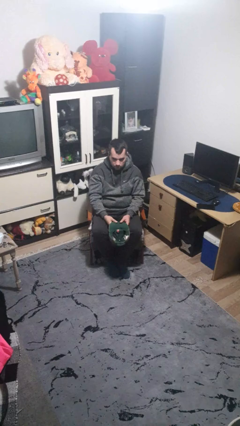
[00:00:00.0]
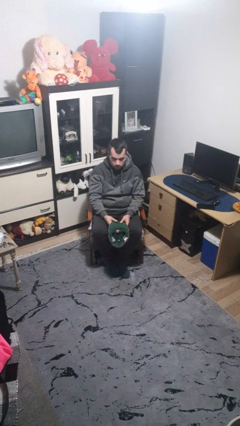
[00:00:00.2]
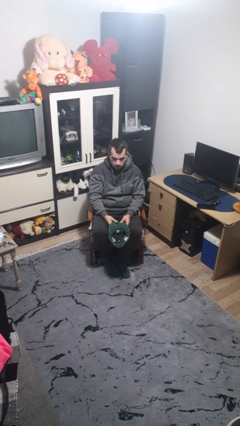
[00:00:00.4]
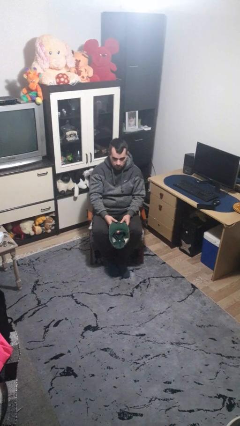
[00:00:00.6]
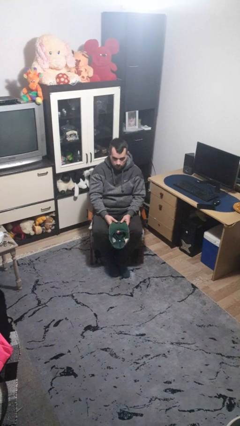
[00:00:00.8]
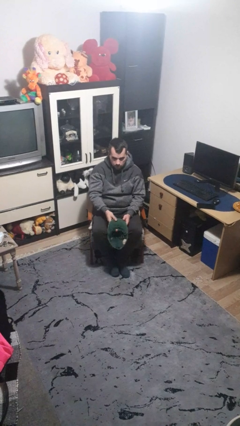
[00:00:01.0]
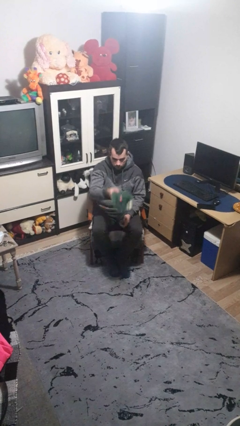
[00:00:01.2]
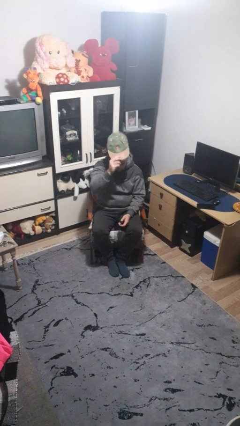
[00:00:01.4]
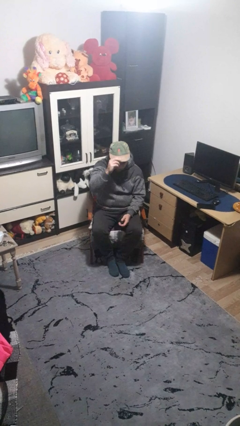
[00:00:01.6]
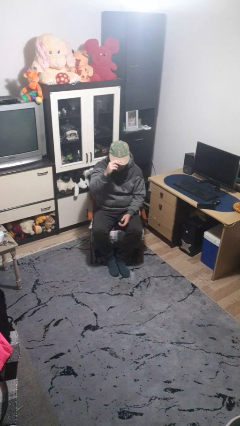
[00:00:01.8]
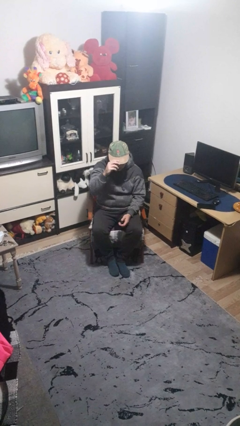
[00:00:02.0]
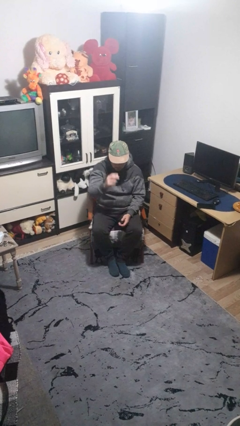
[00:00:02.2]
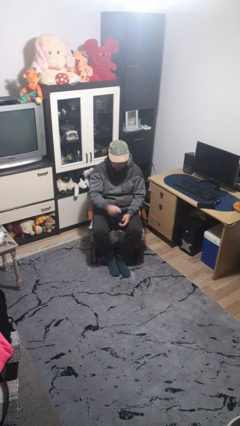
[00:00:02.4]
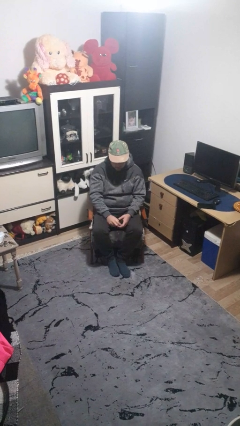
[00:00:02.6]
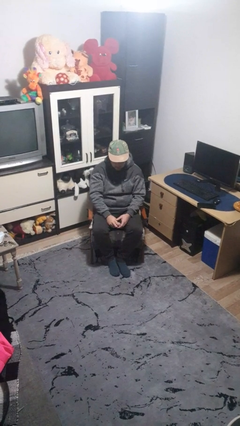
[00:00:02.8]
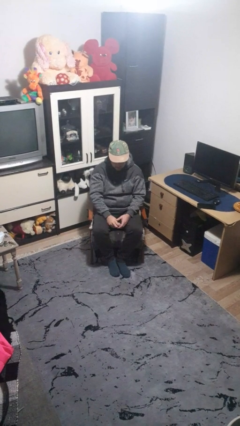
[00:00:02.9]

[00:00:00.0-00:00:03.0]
person puts on hat

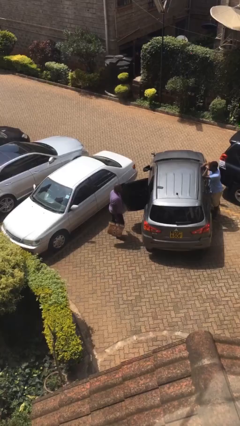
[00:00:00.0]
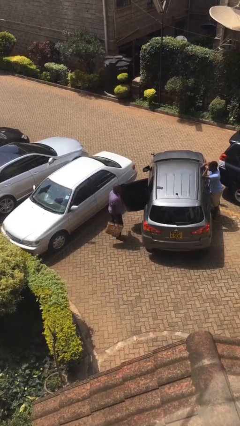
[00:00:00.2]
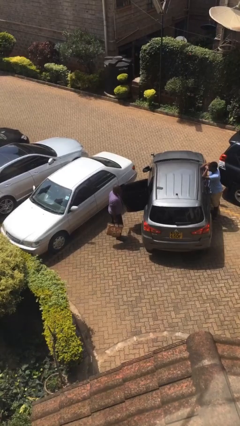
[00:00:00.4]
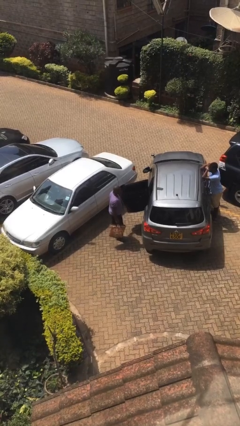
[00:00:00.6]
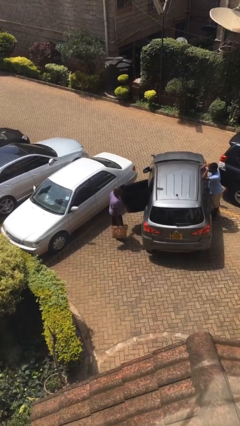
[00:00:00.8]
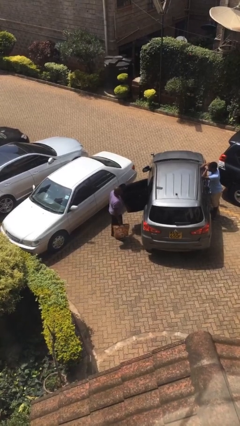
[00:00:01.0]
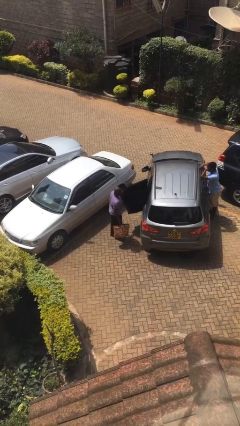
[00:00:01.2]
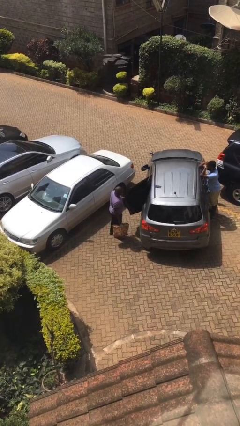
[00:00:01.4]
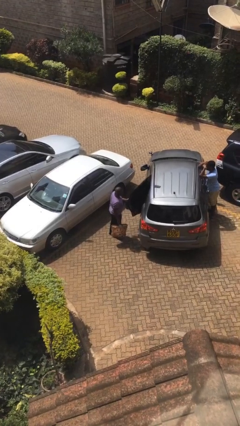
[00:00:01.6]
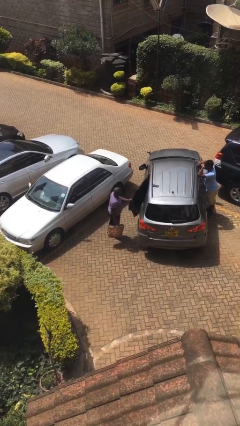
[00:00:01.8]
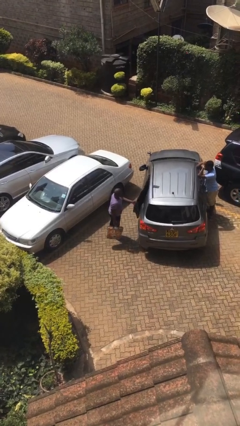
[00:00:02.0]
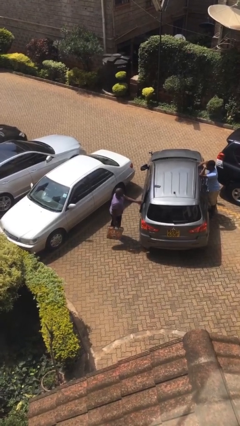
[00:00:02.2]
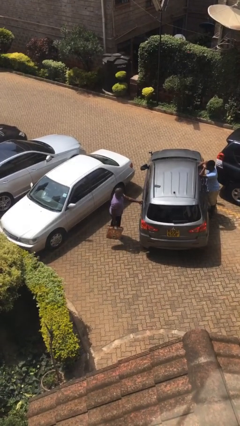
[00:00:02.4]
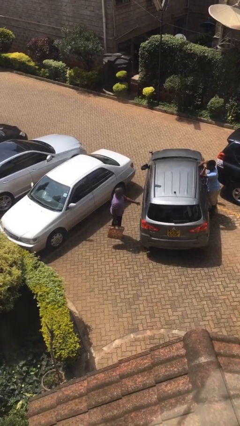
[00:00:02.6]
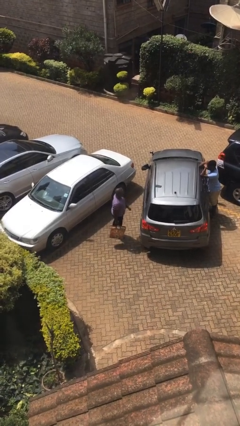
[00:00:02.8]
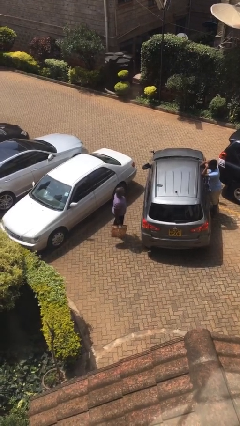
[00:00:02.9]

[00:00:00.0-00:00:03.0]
person closes car door

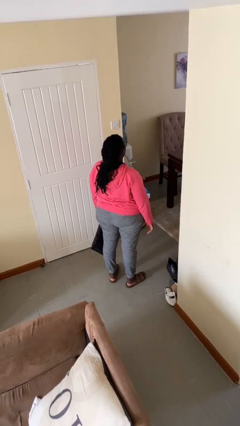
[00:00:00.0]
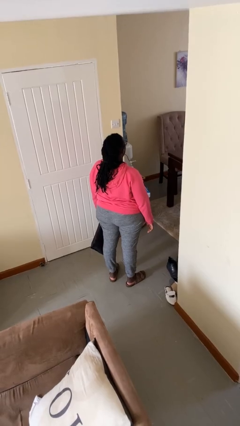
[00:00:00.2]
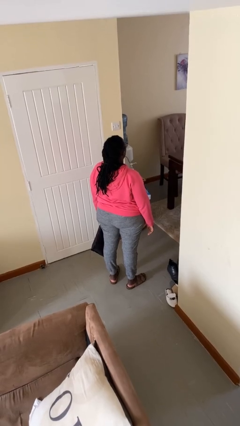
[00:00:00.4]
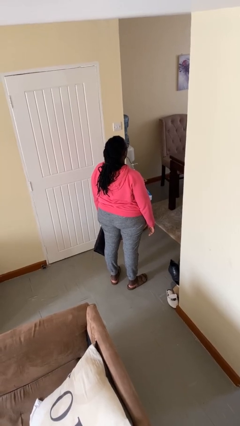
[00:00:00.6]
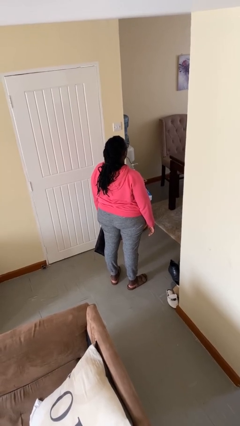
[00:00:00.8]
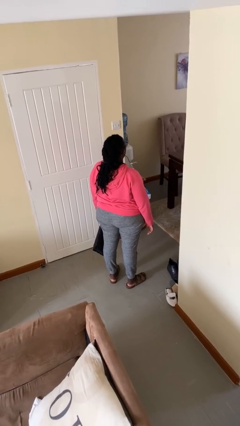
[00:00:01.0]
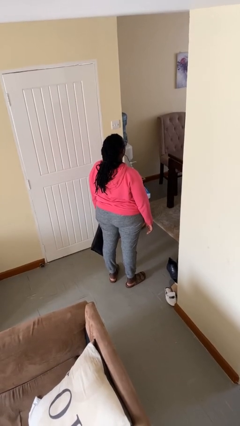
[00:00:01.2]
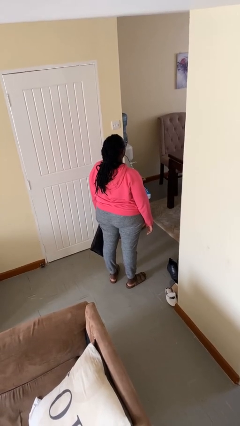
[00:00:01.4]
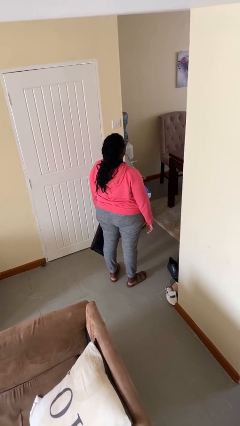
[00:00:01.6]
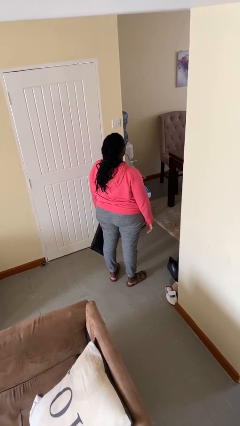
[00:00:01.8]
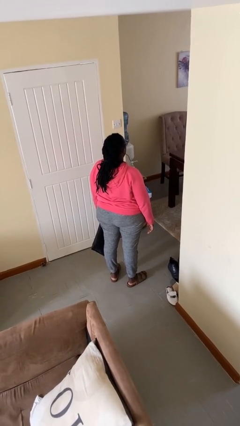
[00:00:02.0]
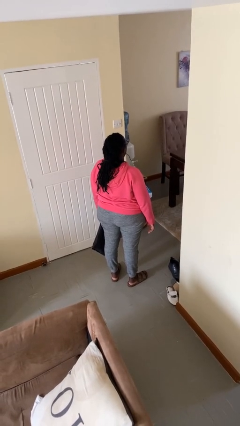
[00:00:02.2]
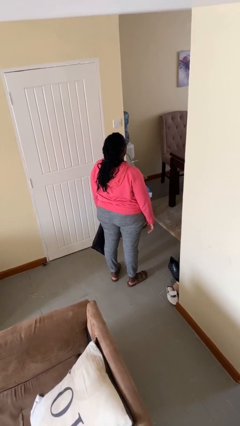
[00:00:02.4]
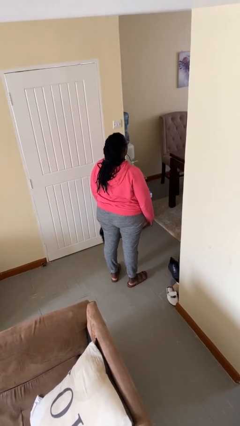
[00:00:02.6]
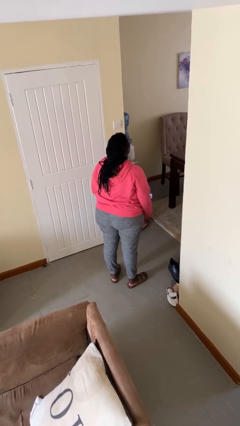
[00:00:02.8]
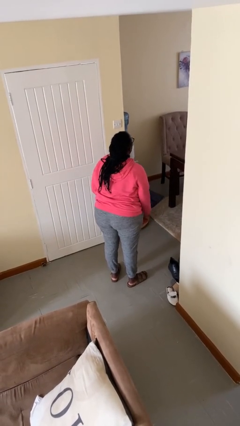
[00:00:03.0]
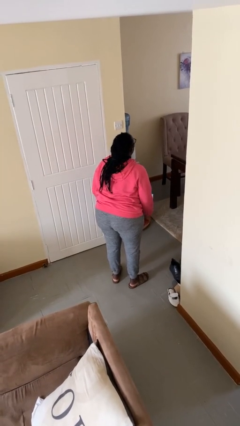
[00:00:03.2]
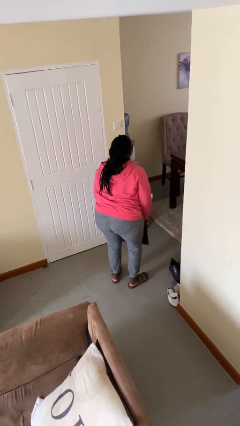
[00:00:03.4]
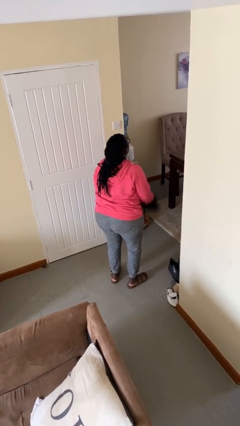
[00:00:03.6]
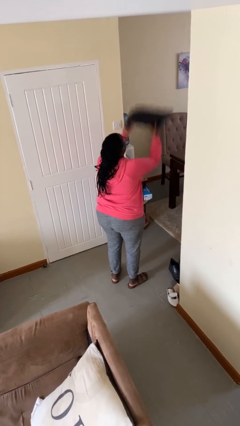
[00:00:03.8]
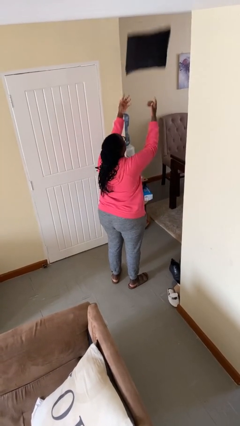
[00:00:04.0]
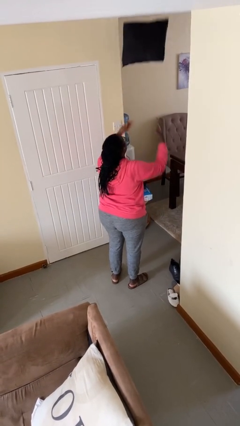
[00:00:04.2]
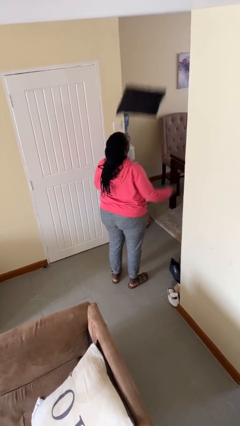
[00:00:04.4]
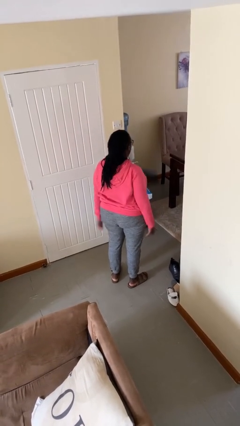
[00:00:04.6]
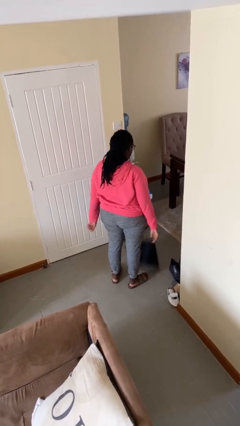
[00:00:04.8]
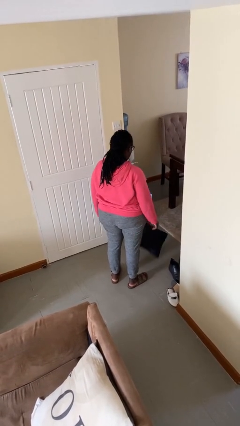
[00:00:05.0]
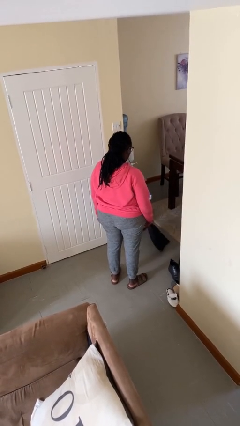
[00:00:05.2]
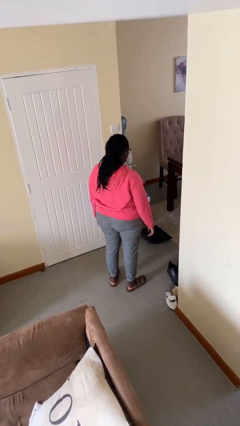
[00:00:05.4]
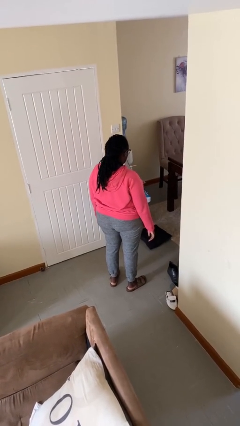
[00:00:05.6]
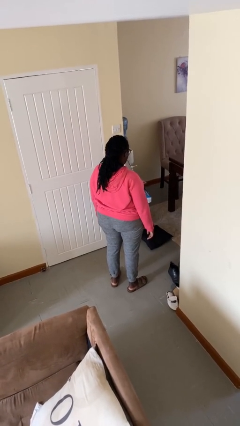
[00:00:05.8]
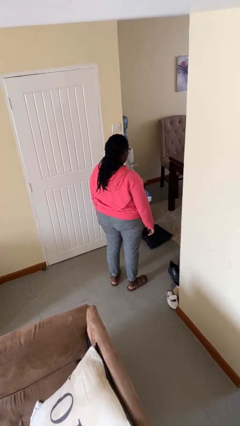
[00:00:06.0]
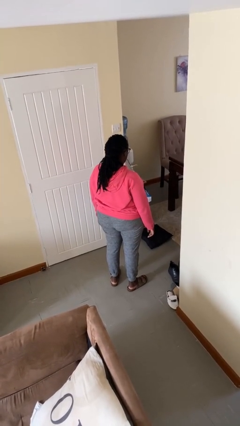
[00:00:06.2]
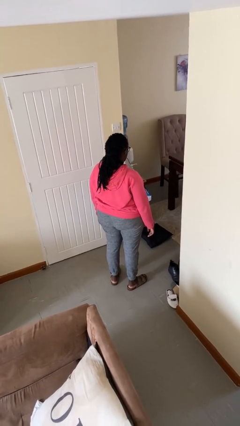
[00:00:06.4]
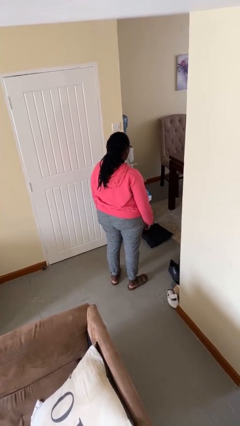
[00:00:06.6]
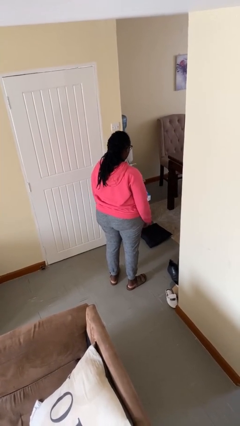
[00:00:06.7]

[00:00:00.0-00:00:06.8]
person throws object into air

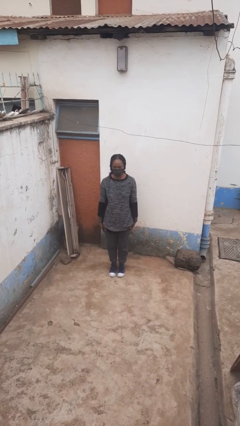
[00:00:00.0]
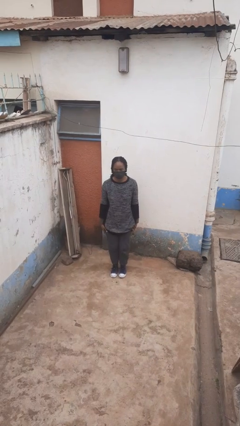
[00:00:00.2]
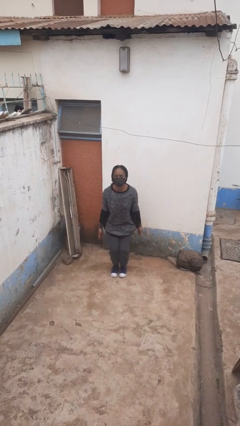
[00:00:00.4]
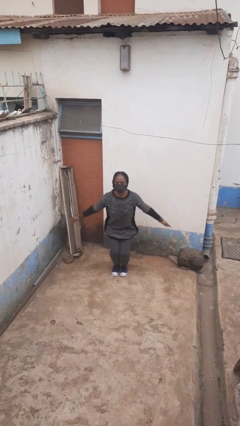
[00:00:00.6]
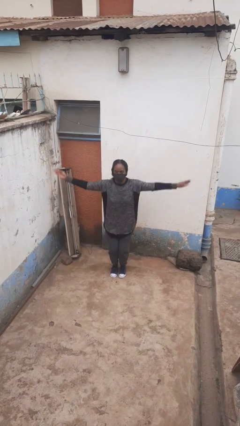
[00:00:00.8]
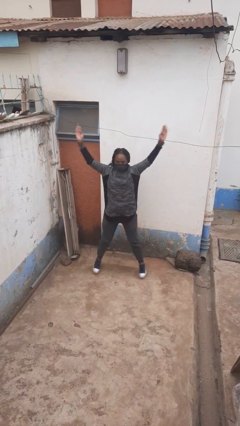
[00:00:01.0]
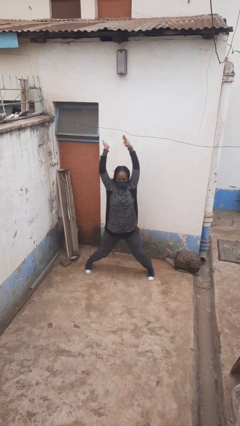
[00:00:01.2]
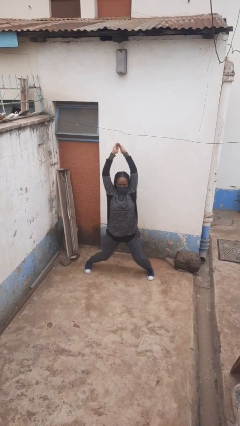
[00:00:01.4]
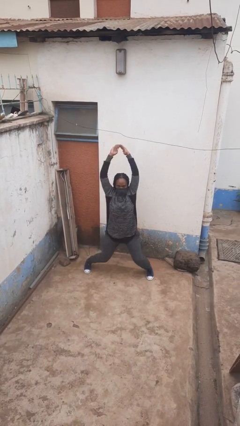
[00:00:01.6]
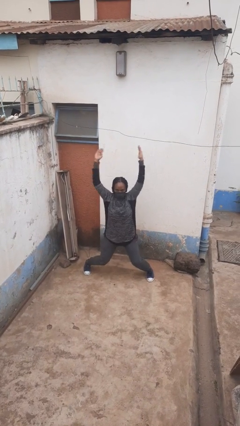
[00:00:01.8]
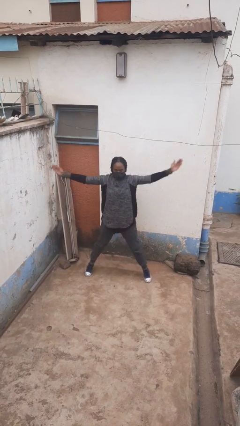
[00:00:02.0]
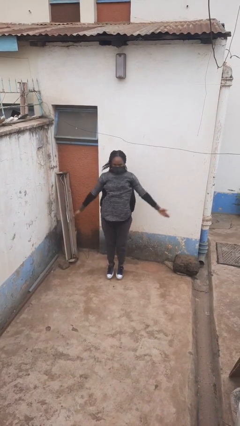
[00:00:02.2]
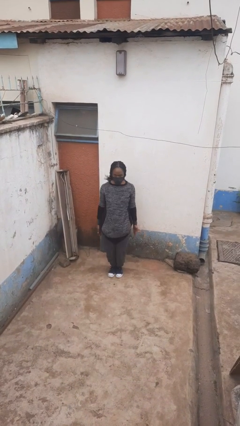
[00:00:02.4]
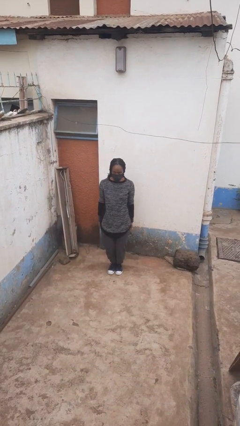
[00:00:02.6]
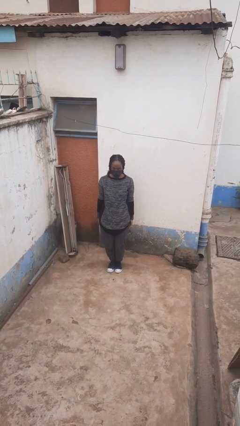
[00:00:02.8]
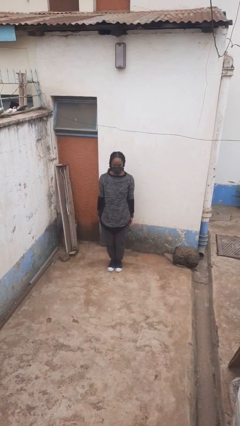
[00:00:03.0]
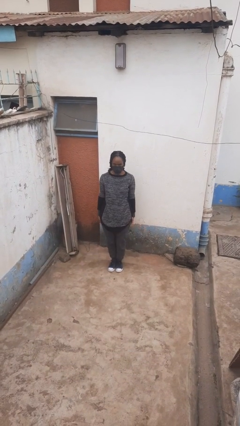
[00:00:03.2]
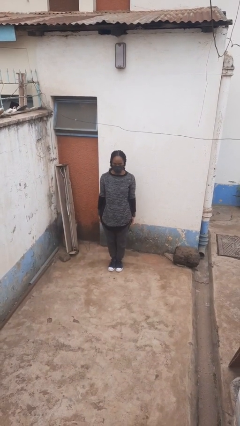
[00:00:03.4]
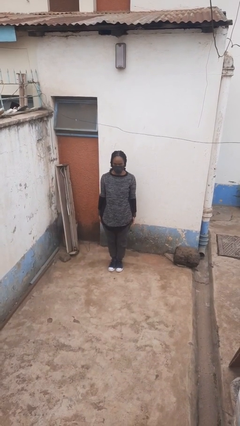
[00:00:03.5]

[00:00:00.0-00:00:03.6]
person exercises with jumping jacks

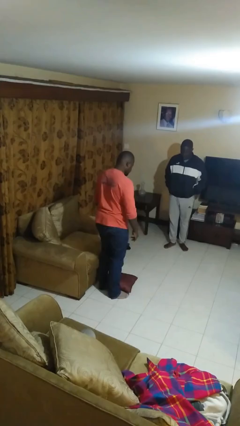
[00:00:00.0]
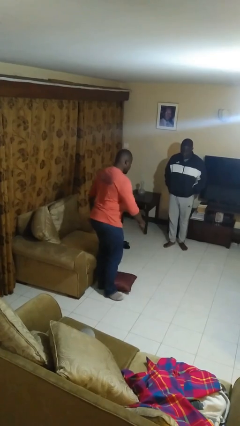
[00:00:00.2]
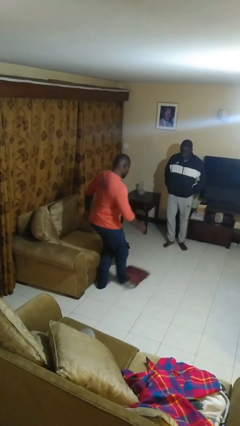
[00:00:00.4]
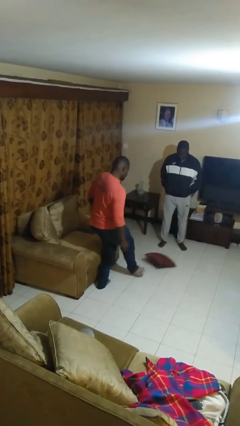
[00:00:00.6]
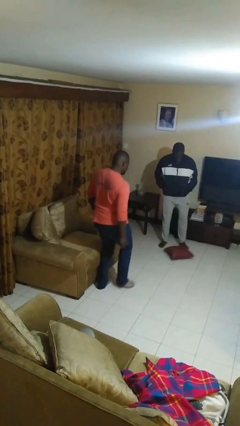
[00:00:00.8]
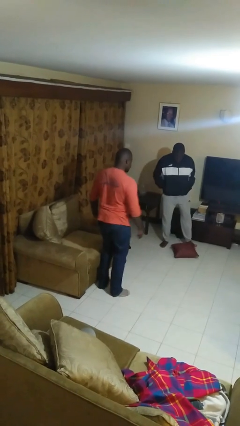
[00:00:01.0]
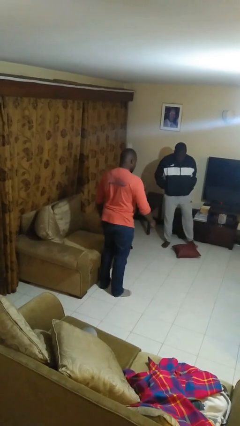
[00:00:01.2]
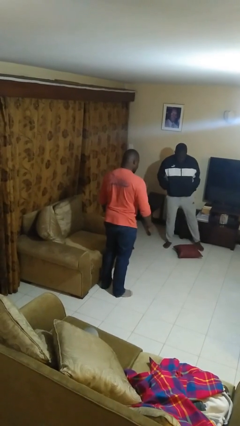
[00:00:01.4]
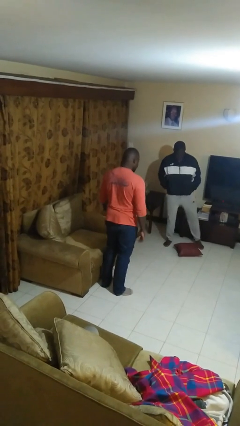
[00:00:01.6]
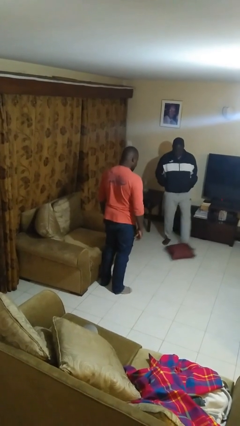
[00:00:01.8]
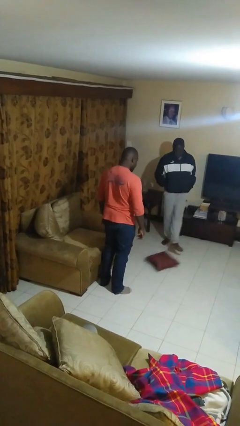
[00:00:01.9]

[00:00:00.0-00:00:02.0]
person kicks object to person